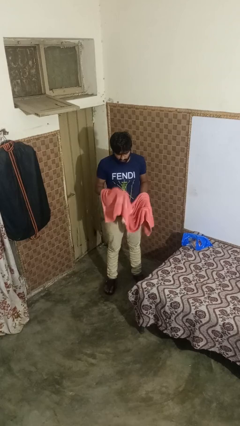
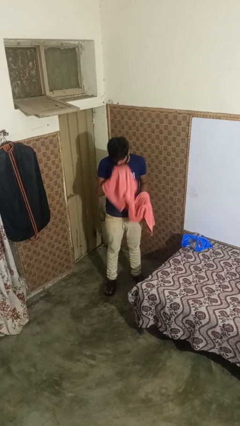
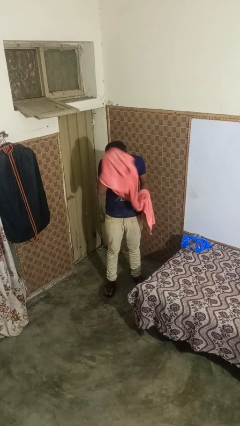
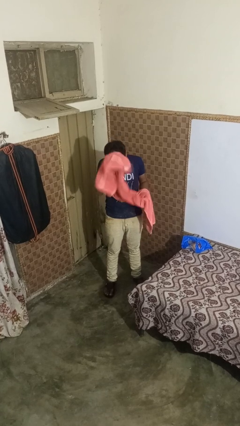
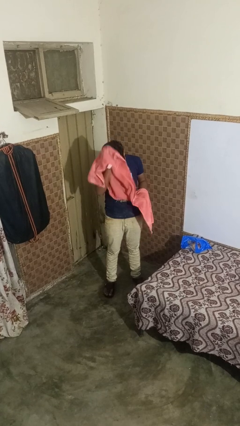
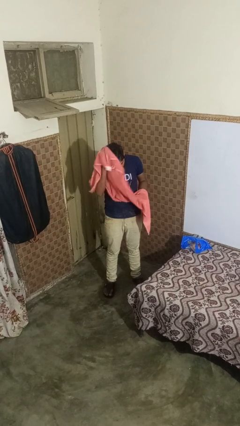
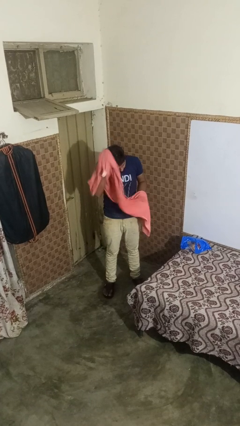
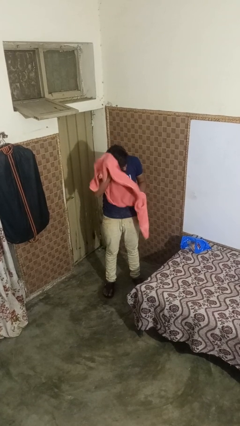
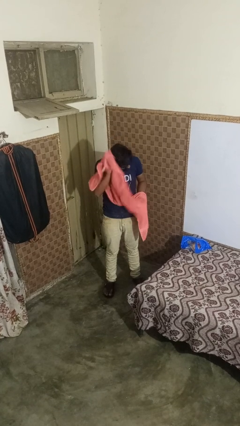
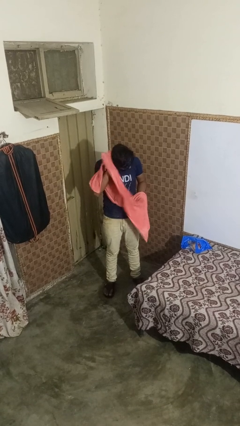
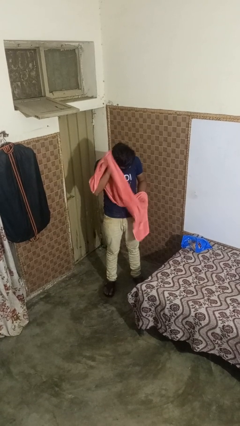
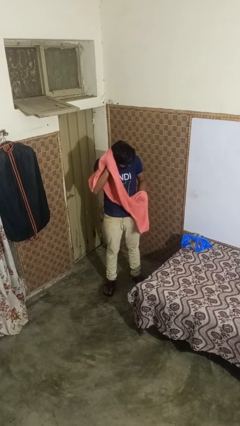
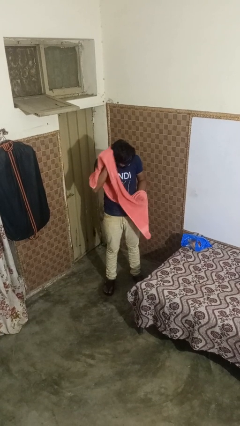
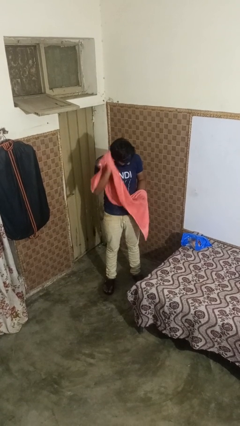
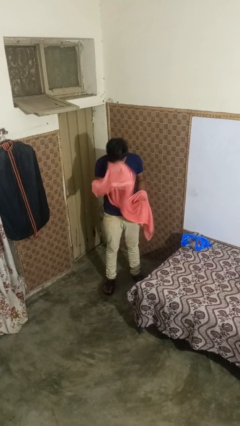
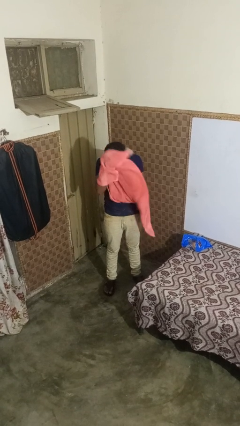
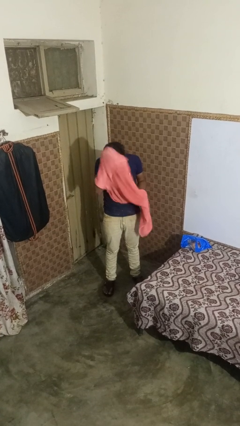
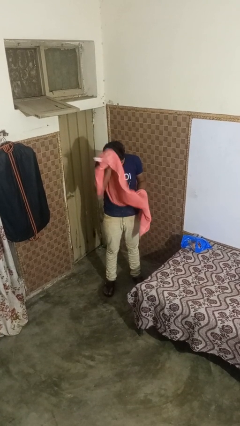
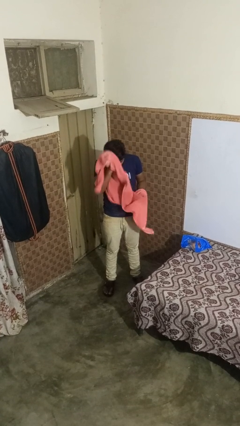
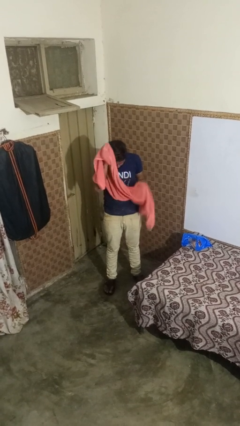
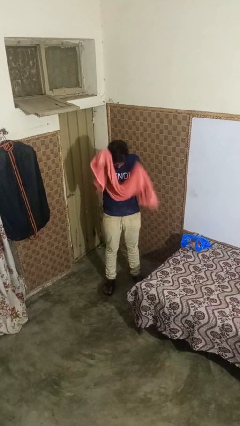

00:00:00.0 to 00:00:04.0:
person dries hair with towel

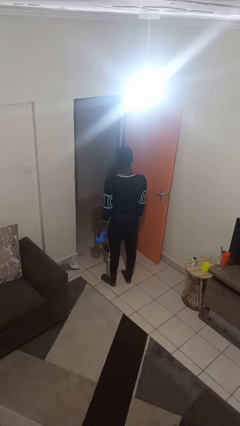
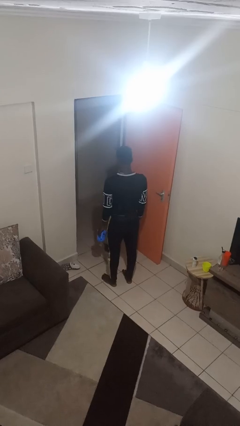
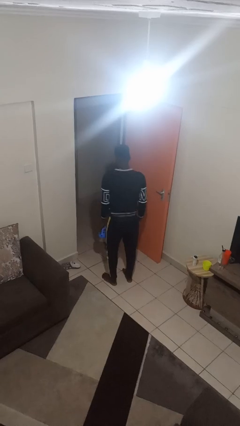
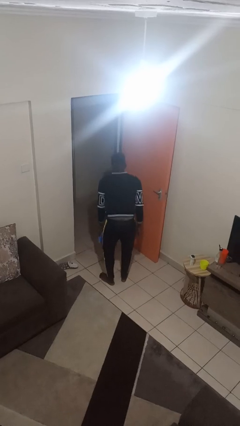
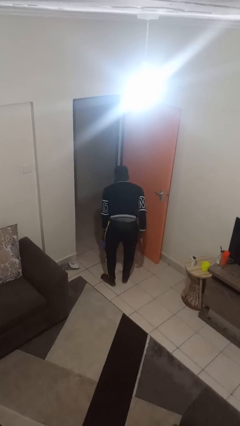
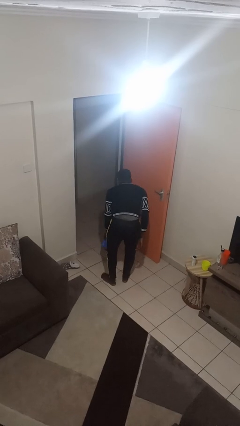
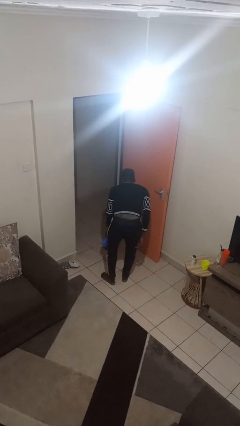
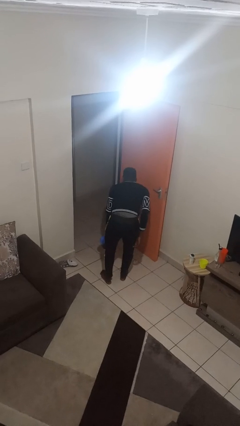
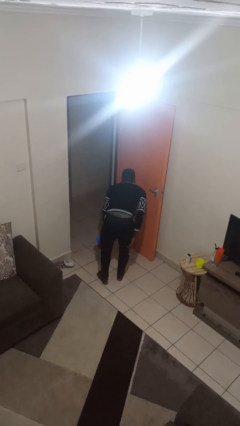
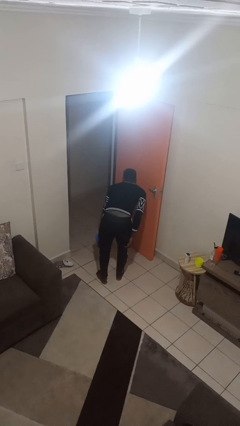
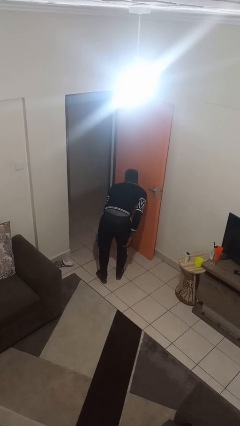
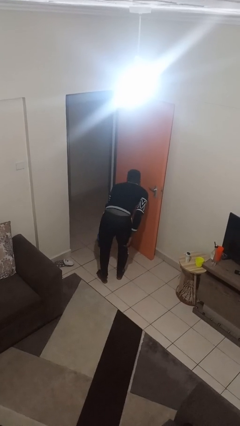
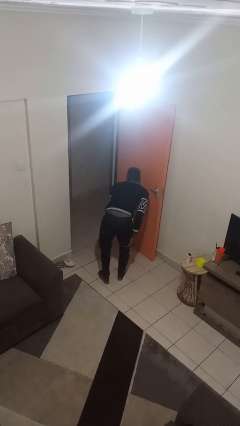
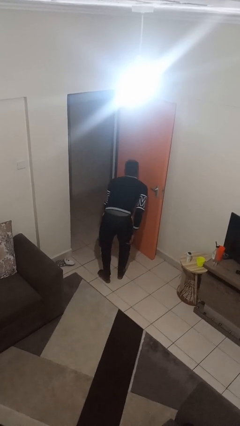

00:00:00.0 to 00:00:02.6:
person waters houseplant

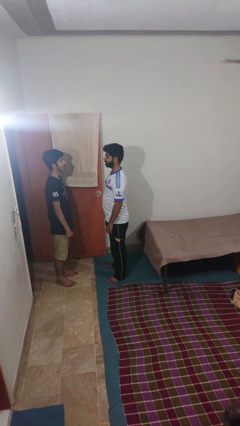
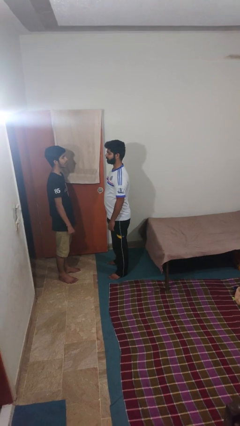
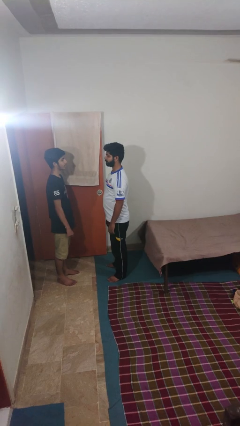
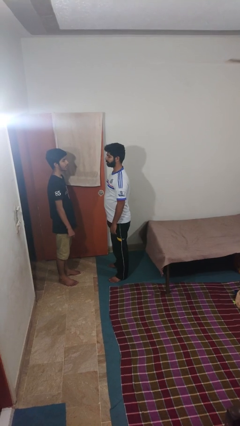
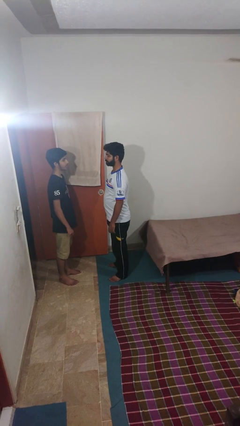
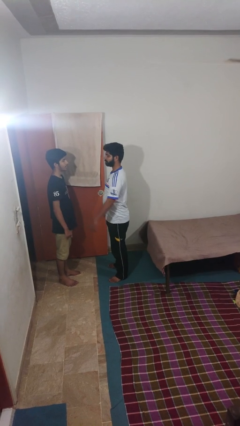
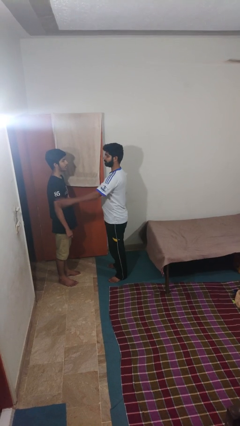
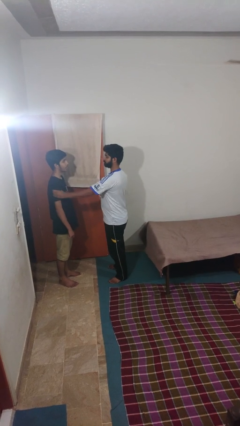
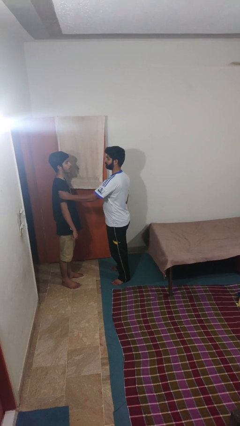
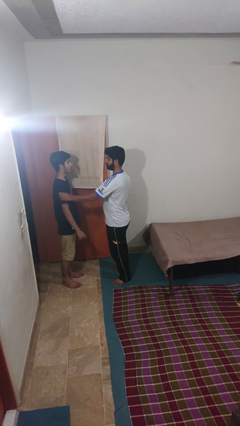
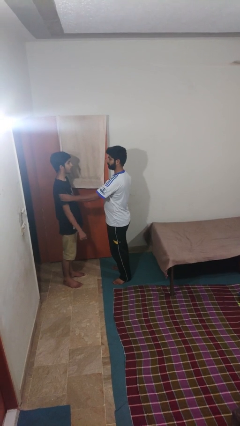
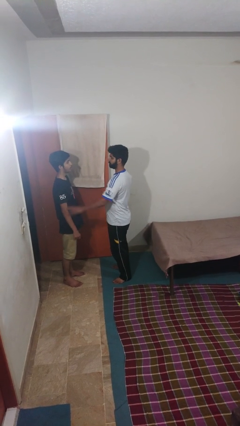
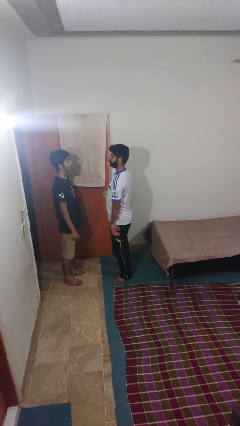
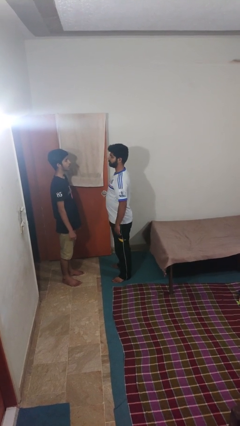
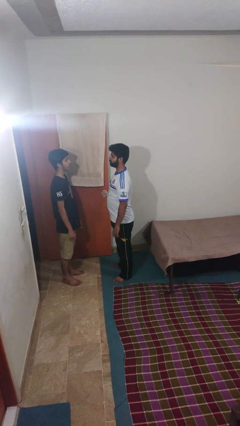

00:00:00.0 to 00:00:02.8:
person grabs person by bicep

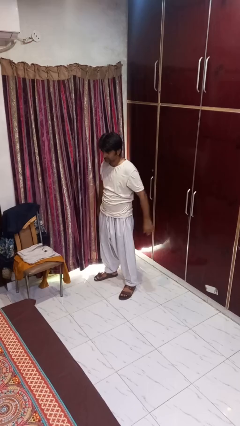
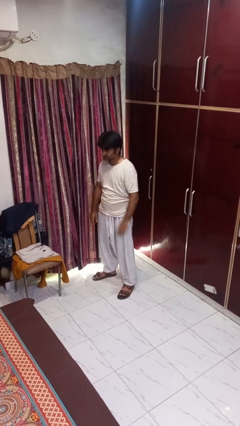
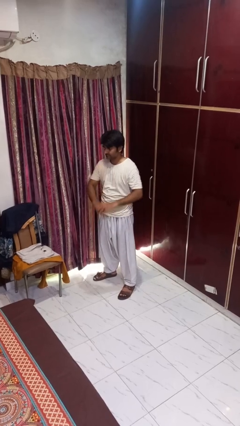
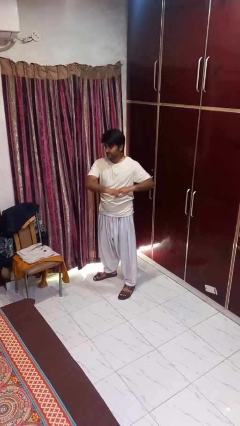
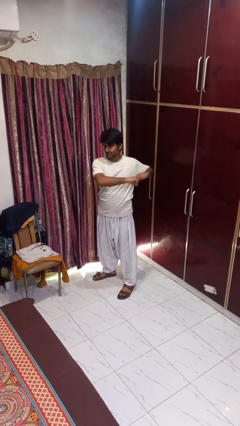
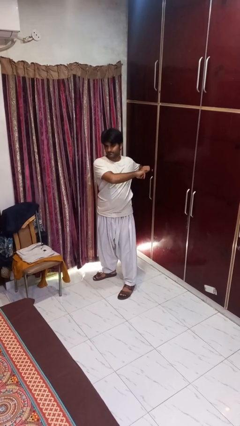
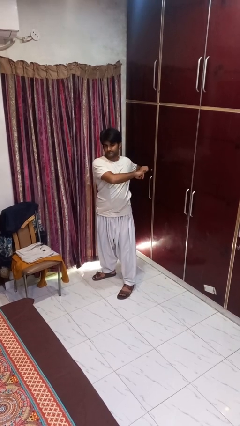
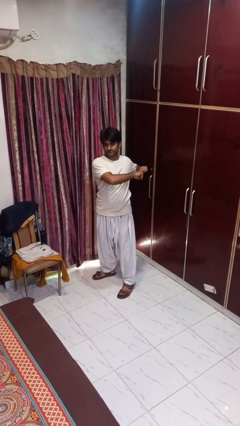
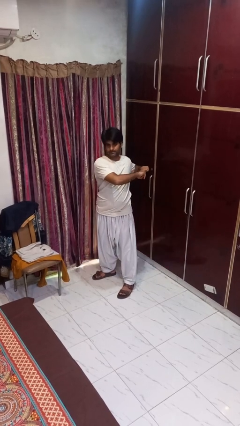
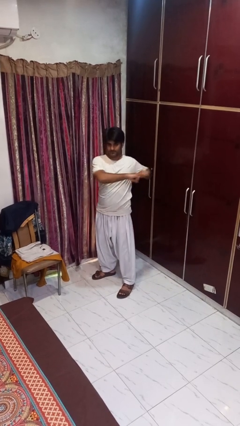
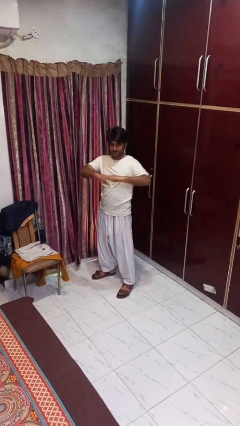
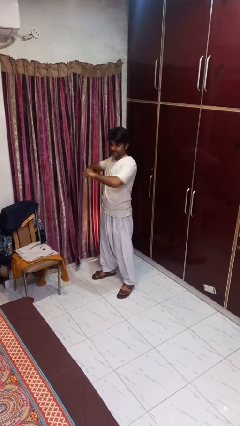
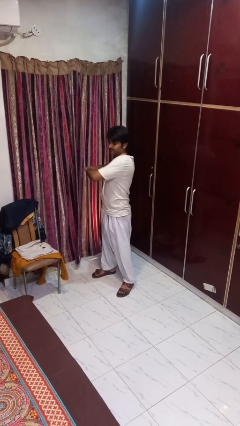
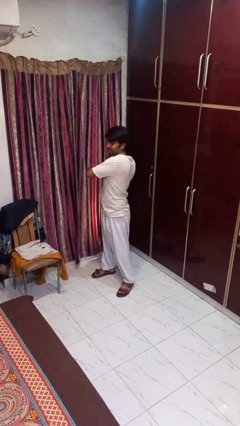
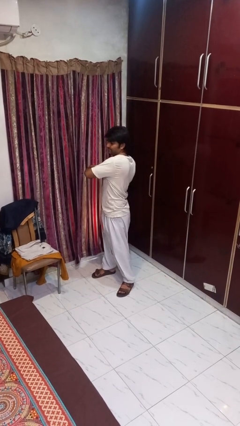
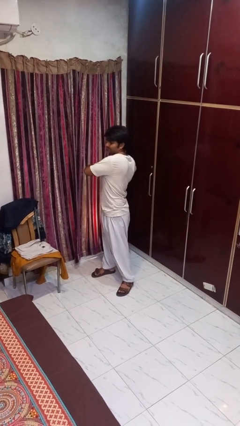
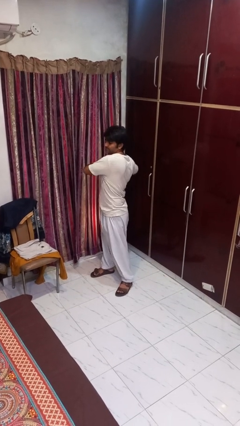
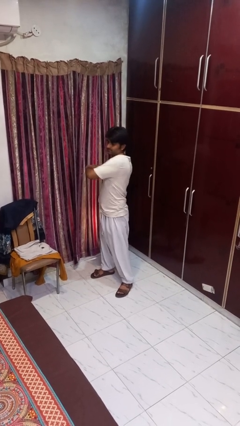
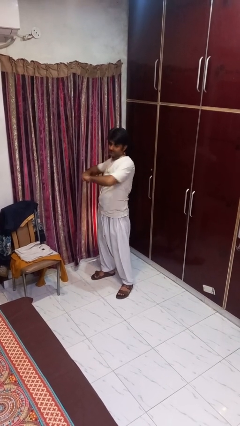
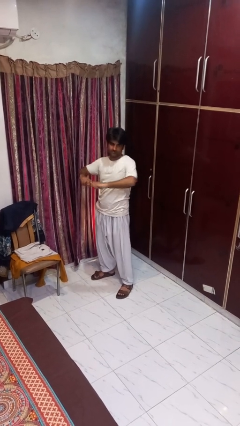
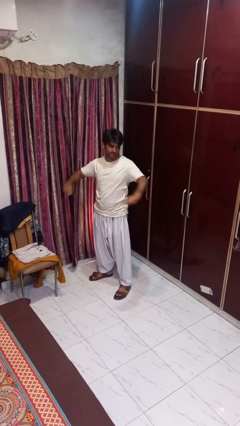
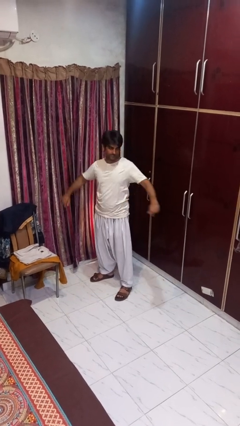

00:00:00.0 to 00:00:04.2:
person stretches arms to side

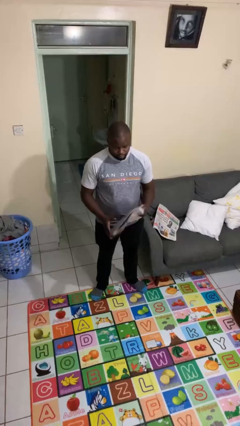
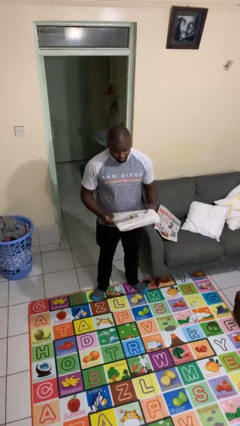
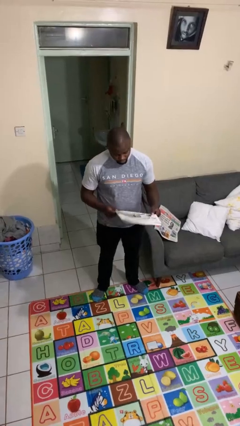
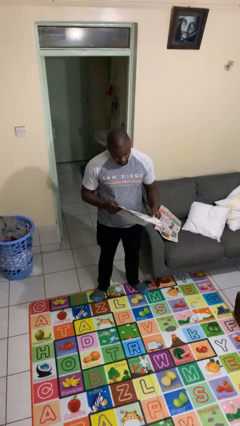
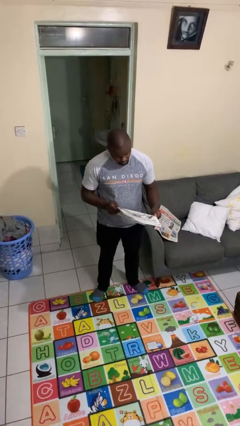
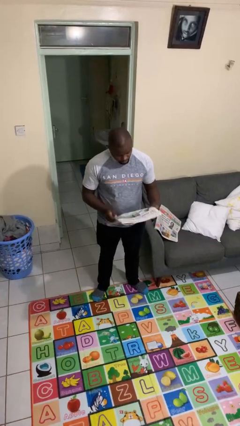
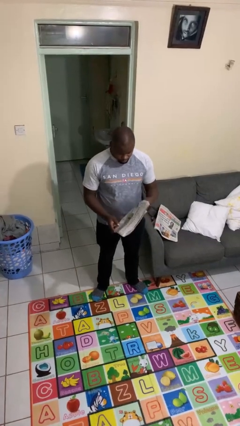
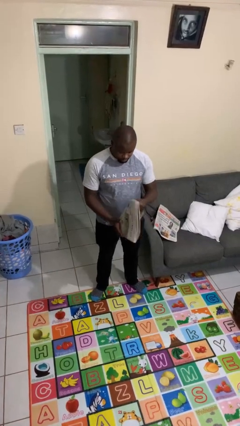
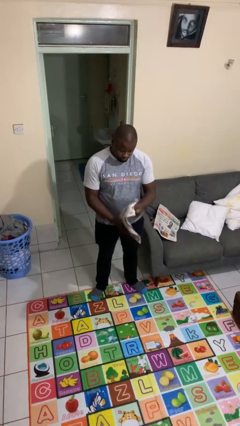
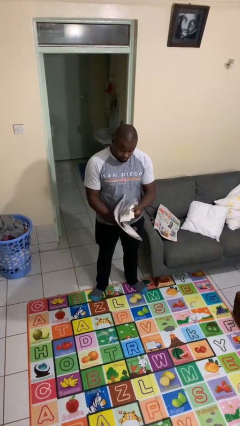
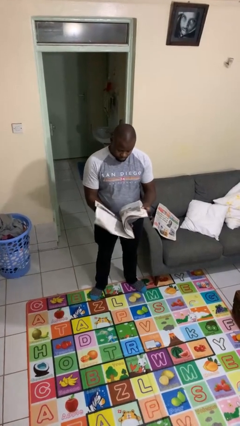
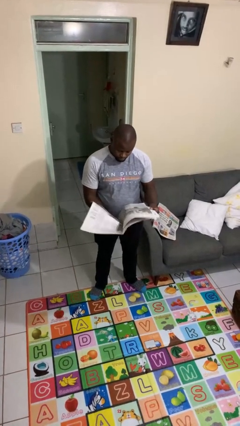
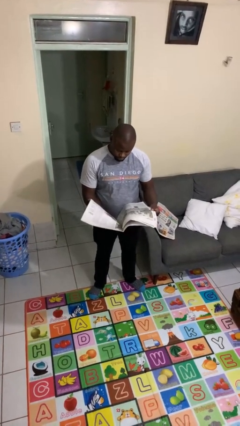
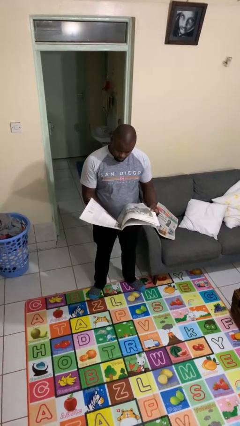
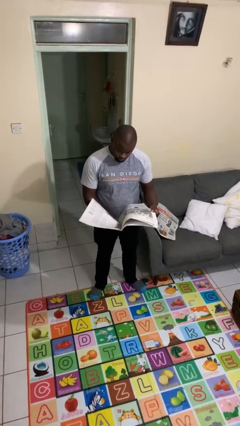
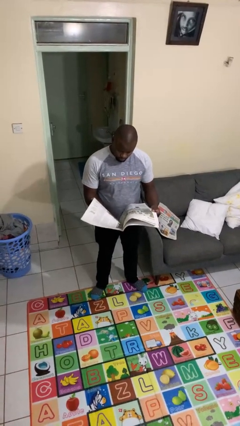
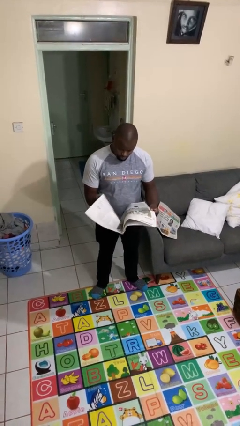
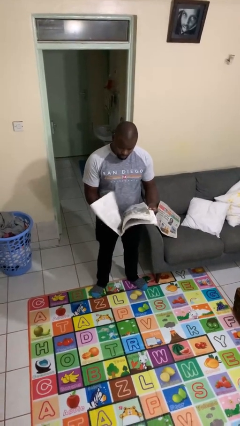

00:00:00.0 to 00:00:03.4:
person reads newspaper

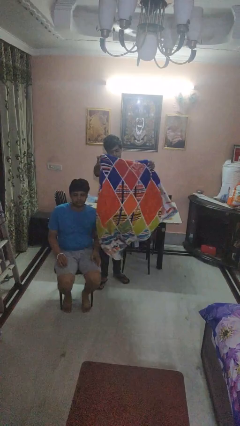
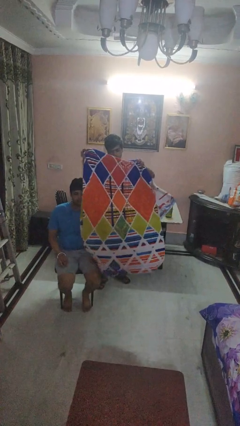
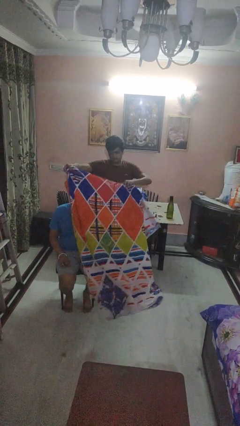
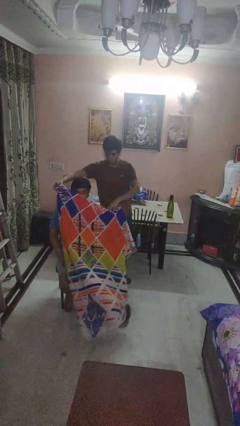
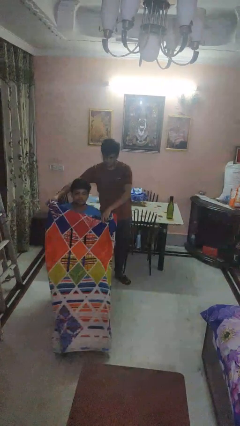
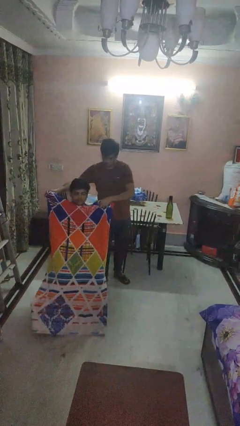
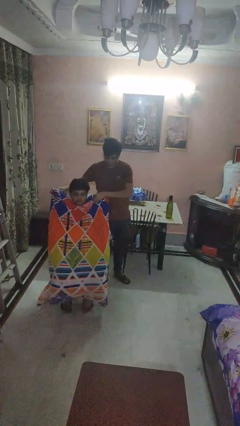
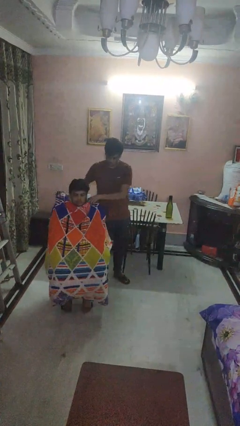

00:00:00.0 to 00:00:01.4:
person covers friend with blanket
